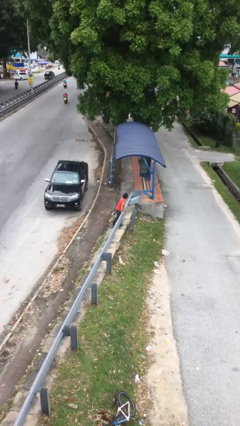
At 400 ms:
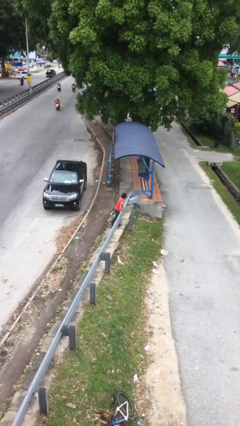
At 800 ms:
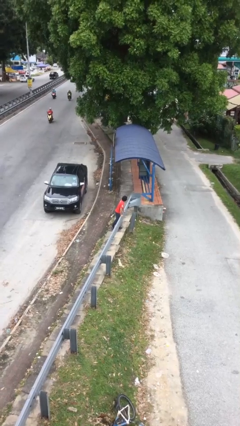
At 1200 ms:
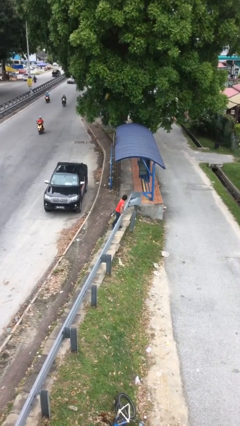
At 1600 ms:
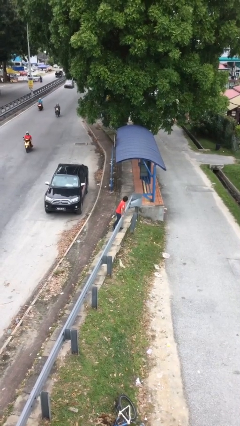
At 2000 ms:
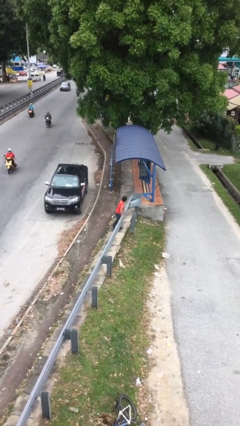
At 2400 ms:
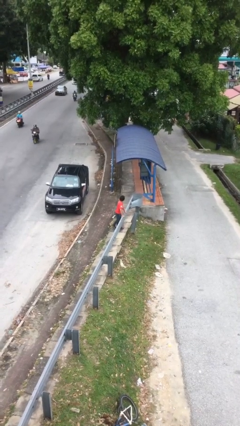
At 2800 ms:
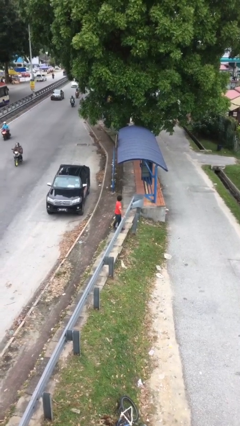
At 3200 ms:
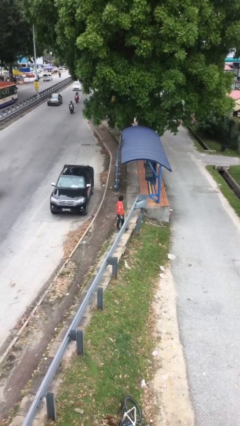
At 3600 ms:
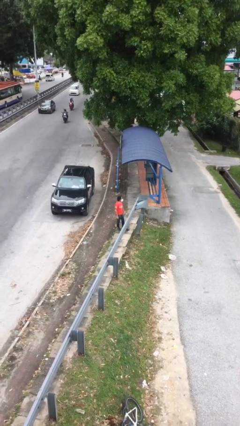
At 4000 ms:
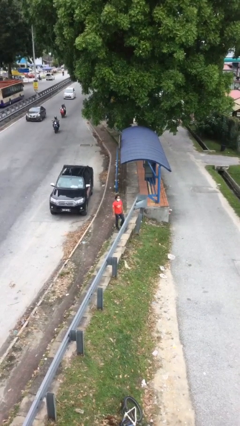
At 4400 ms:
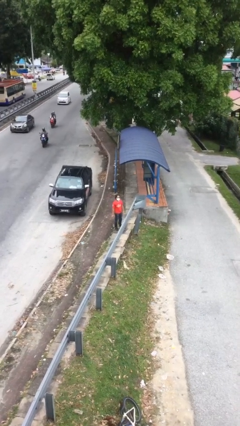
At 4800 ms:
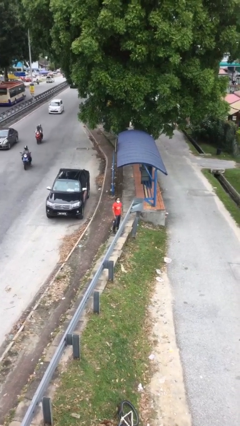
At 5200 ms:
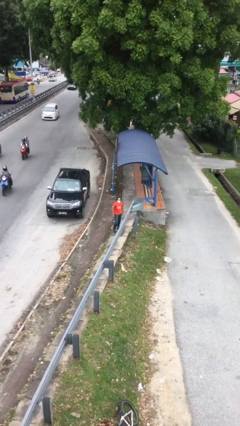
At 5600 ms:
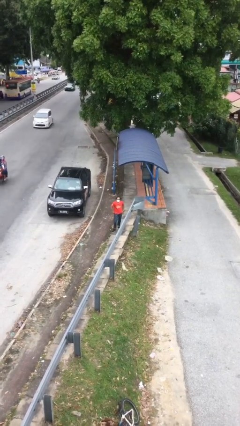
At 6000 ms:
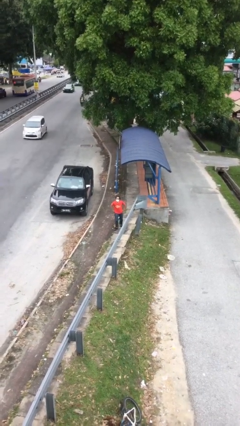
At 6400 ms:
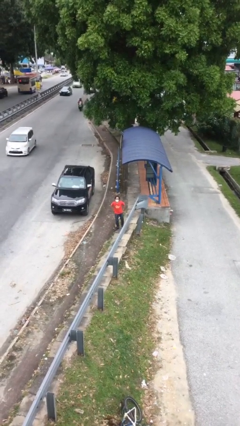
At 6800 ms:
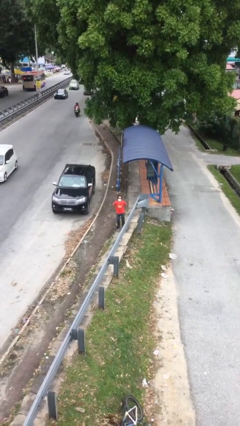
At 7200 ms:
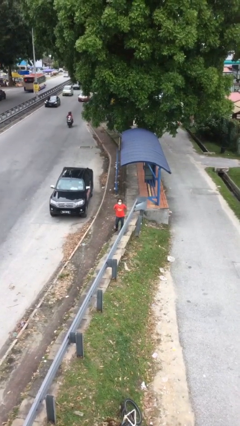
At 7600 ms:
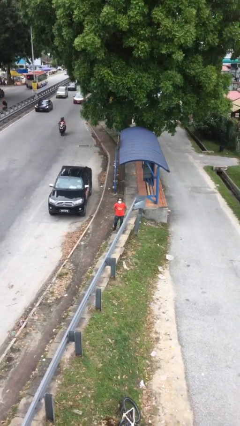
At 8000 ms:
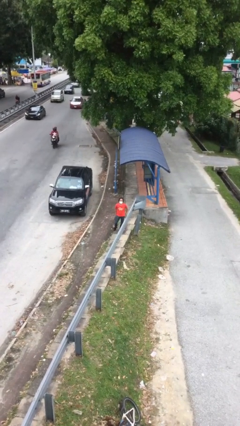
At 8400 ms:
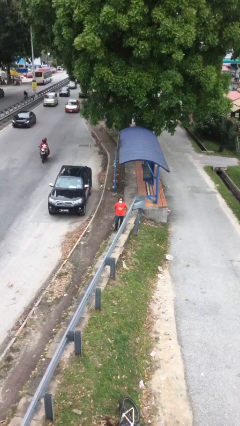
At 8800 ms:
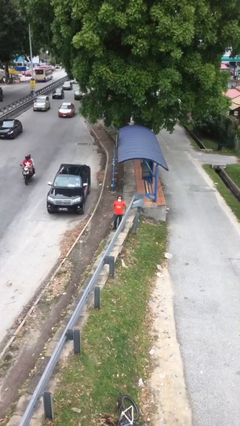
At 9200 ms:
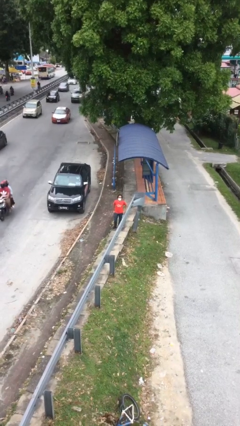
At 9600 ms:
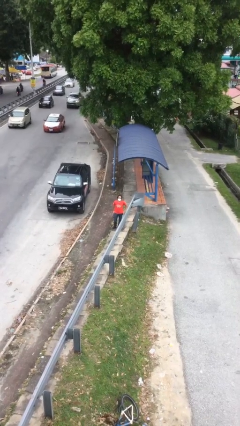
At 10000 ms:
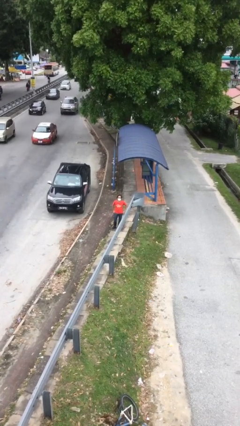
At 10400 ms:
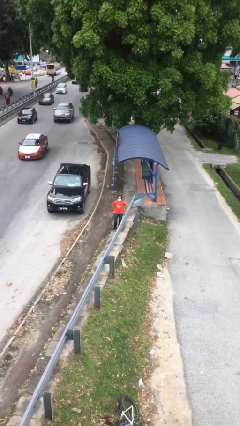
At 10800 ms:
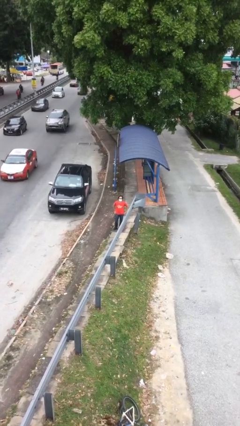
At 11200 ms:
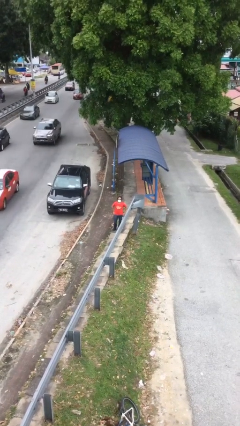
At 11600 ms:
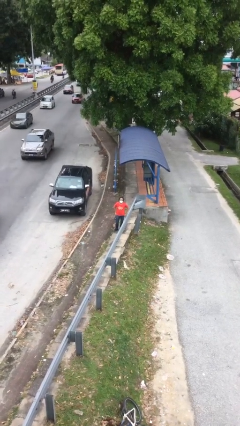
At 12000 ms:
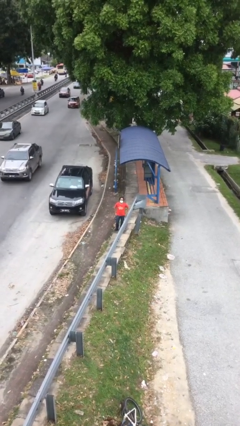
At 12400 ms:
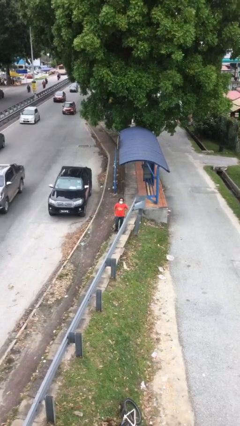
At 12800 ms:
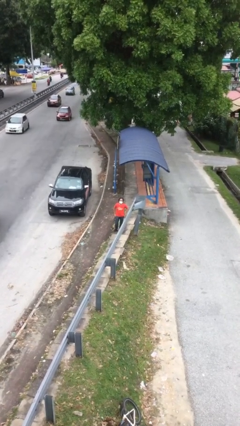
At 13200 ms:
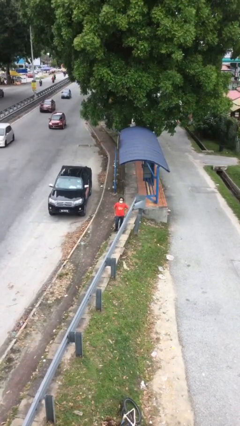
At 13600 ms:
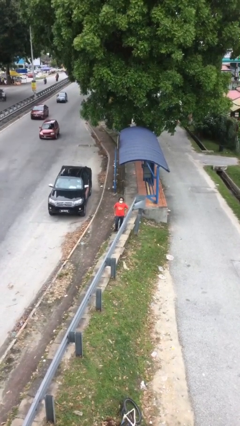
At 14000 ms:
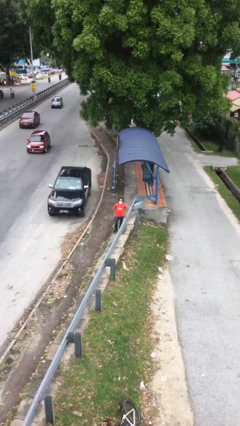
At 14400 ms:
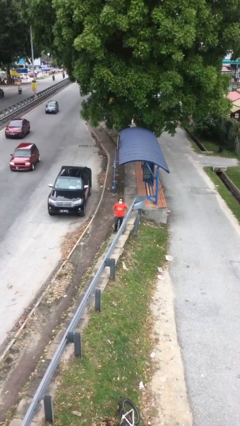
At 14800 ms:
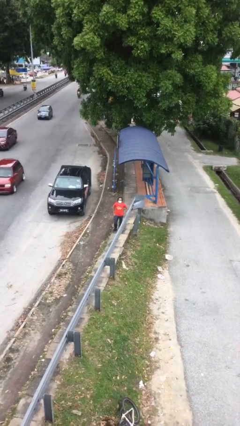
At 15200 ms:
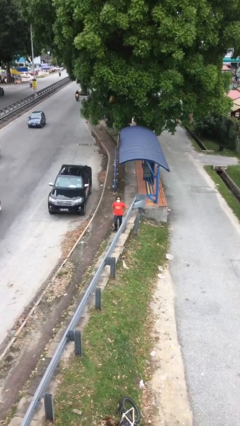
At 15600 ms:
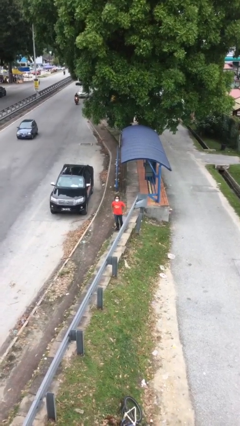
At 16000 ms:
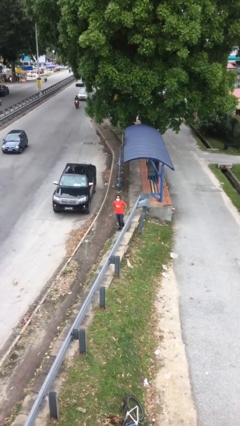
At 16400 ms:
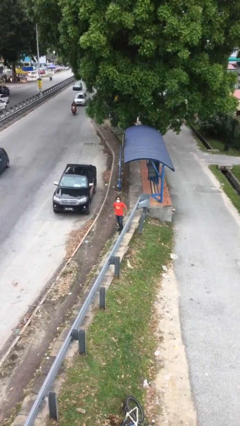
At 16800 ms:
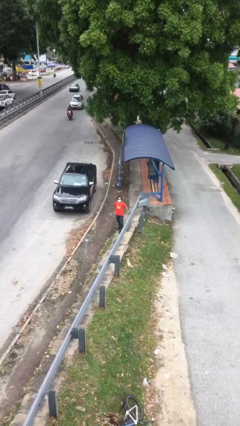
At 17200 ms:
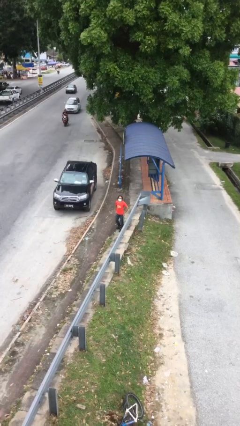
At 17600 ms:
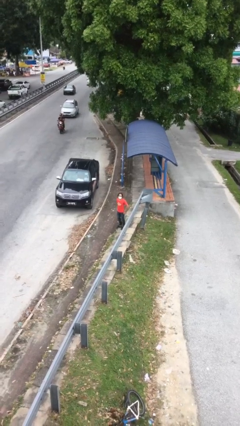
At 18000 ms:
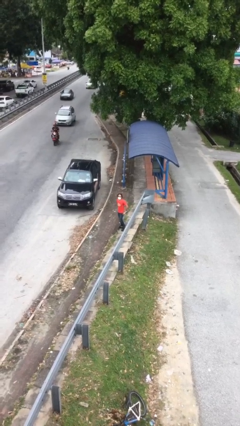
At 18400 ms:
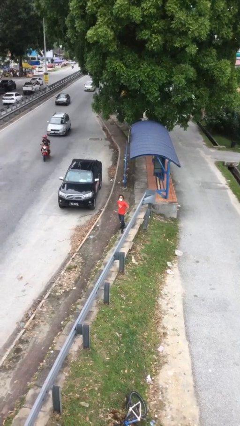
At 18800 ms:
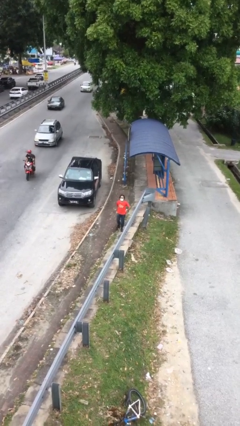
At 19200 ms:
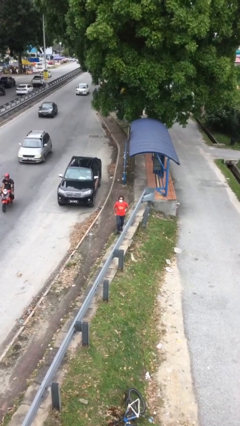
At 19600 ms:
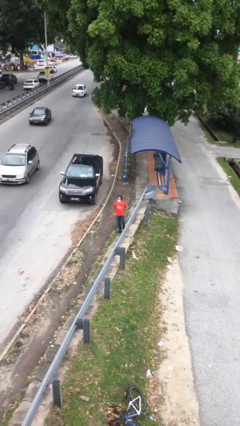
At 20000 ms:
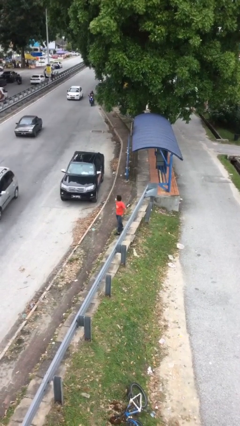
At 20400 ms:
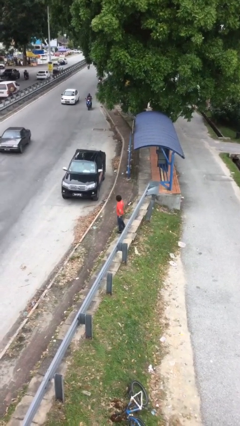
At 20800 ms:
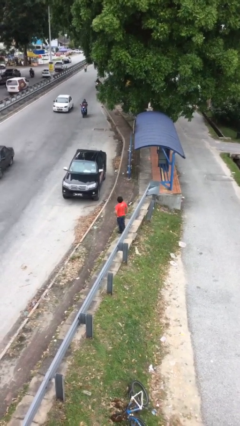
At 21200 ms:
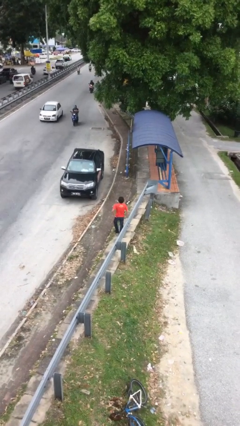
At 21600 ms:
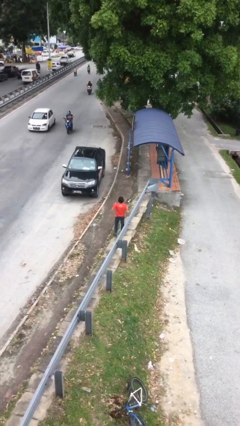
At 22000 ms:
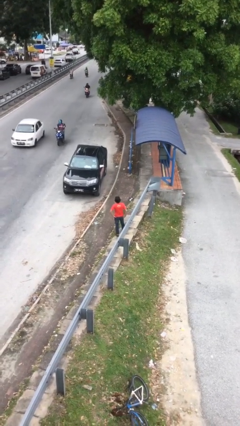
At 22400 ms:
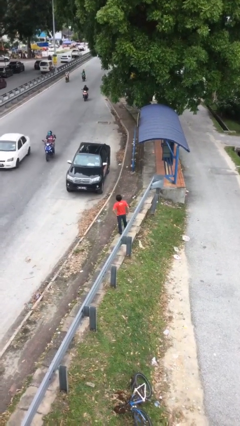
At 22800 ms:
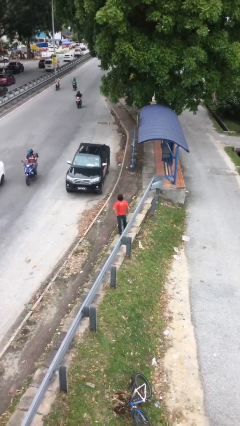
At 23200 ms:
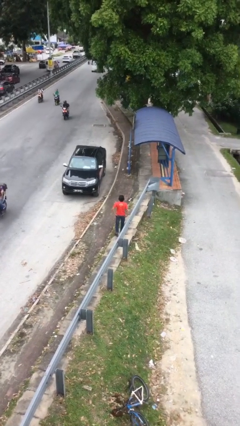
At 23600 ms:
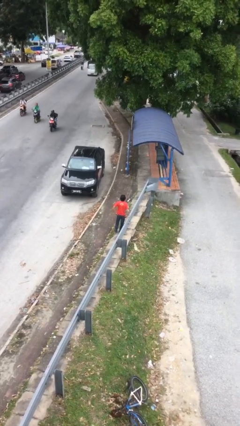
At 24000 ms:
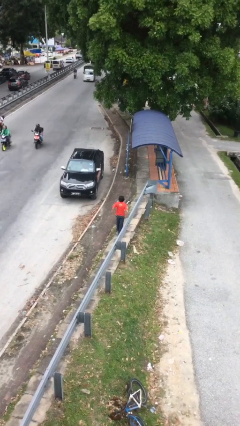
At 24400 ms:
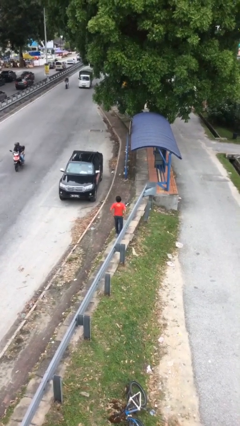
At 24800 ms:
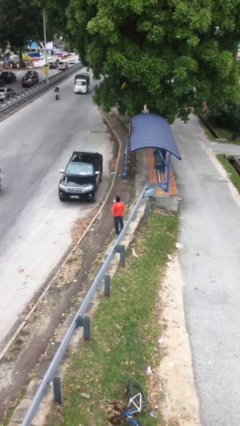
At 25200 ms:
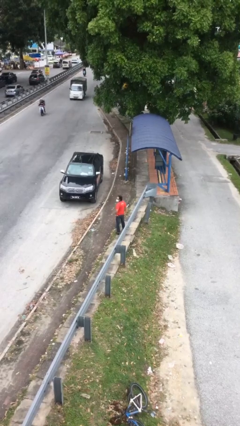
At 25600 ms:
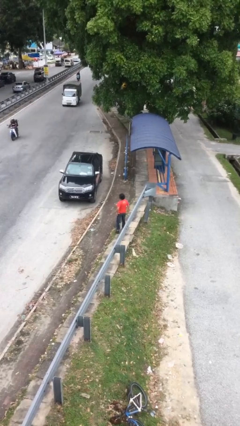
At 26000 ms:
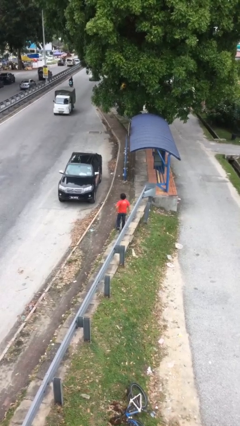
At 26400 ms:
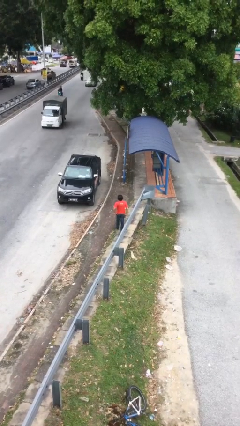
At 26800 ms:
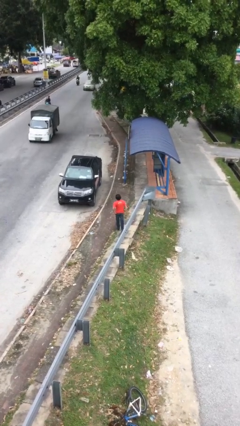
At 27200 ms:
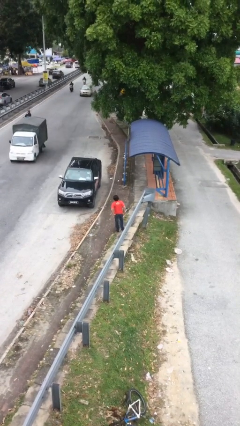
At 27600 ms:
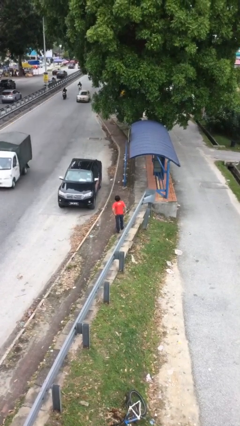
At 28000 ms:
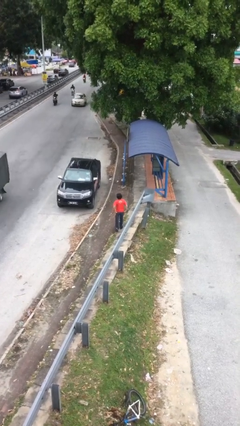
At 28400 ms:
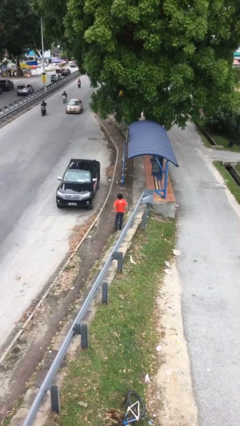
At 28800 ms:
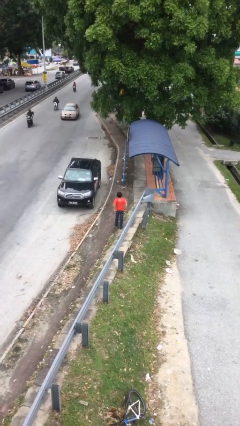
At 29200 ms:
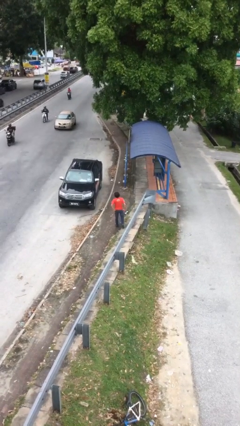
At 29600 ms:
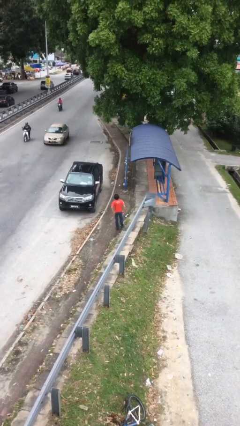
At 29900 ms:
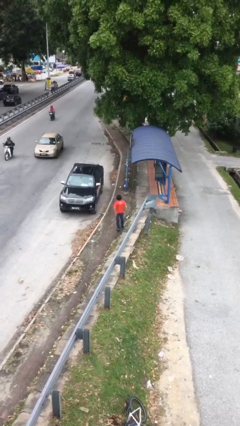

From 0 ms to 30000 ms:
person walks

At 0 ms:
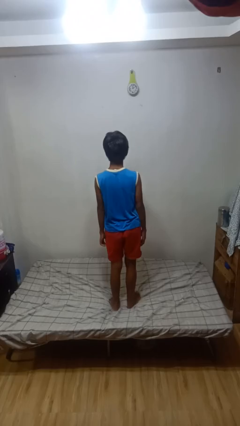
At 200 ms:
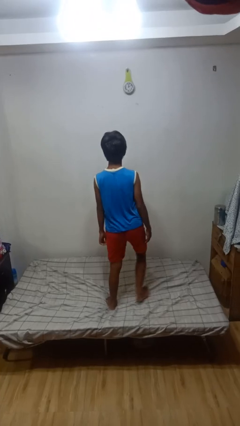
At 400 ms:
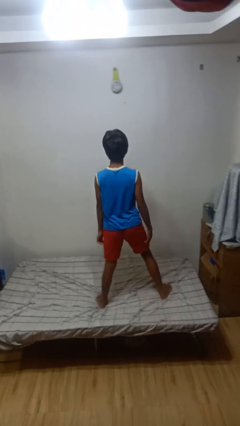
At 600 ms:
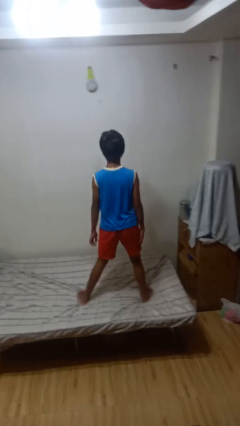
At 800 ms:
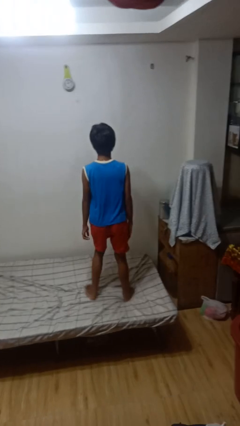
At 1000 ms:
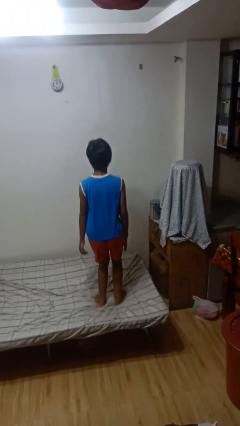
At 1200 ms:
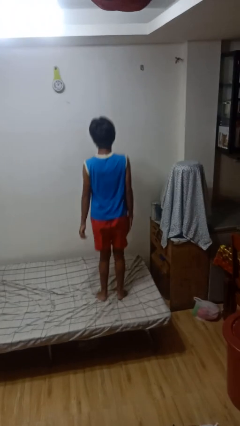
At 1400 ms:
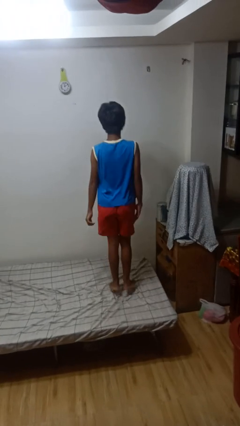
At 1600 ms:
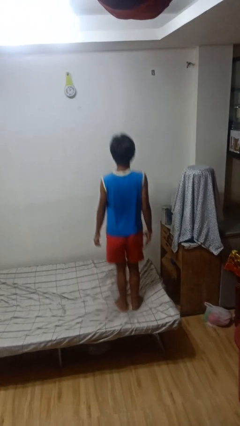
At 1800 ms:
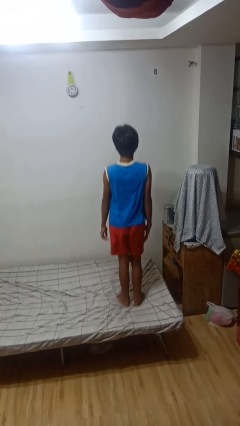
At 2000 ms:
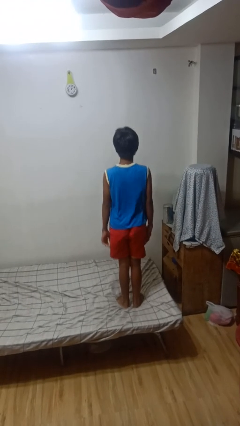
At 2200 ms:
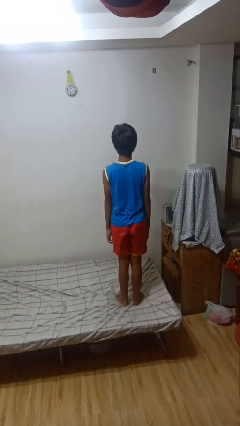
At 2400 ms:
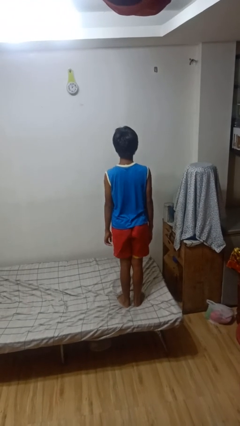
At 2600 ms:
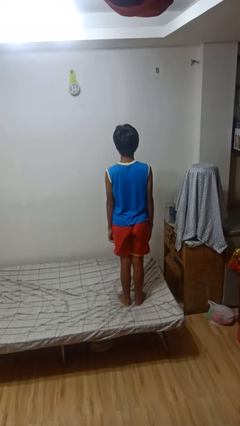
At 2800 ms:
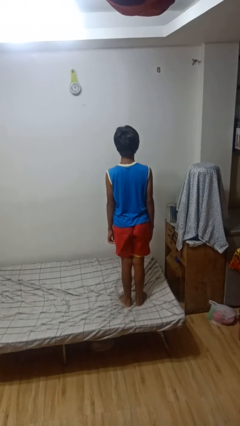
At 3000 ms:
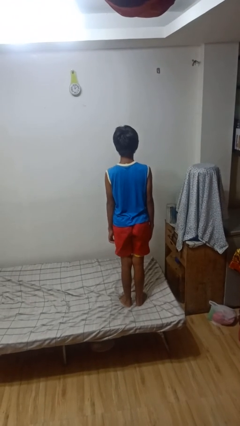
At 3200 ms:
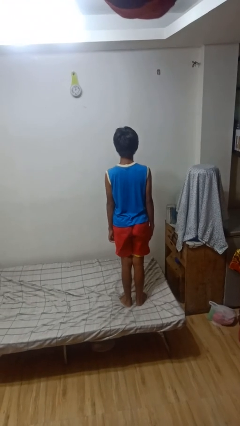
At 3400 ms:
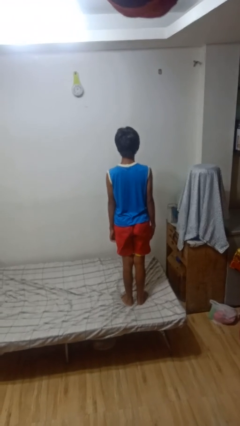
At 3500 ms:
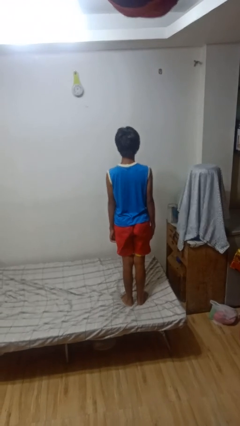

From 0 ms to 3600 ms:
person jumps on bed
